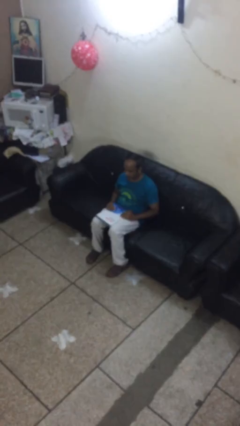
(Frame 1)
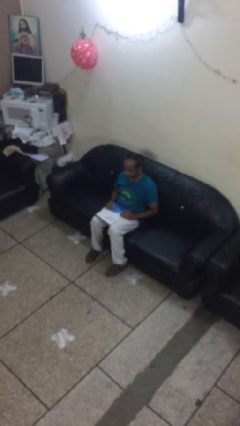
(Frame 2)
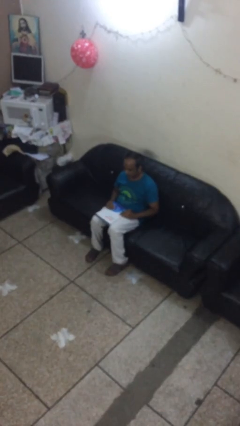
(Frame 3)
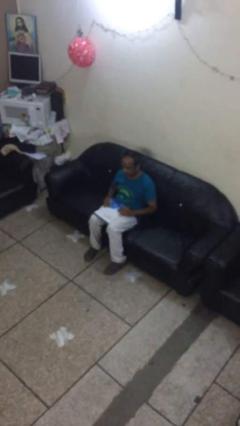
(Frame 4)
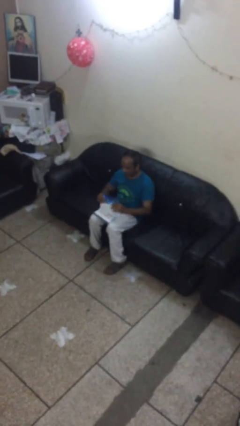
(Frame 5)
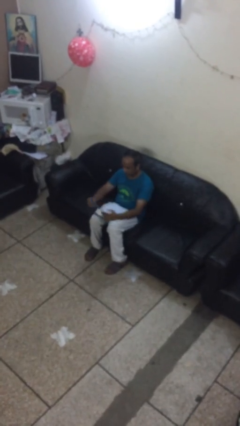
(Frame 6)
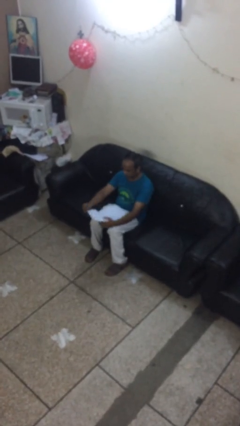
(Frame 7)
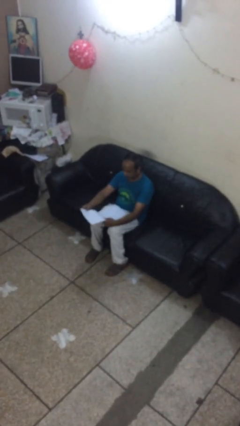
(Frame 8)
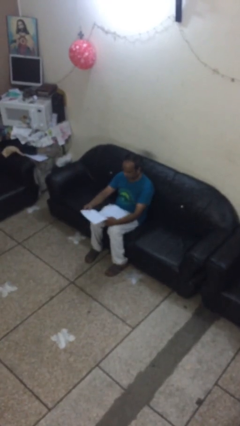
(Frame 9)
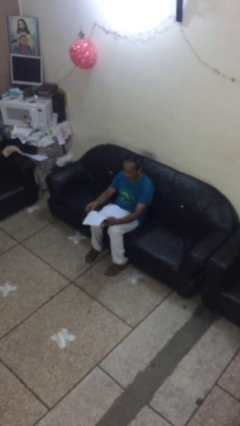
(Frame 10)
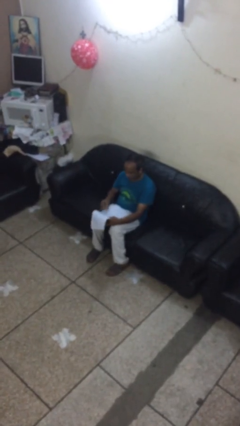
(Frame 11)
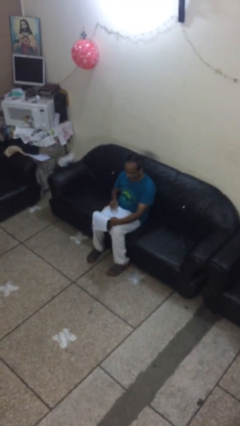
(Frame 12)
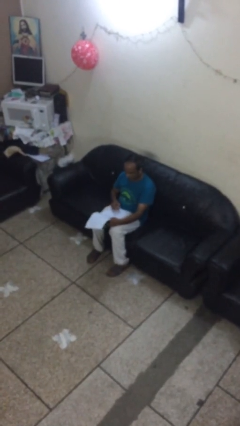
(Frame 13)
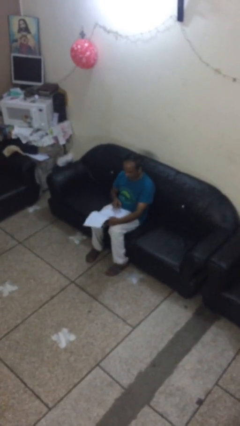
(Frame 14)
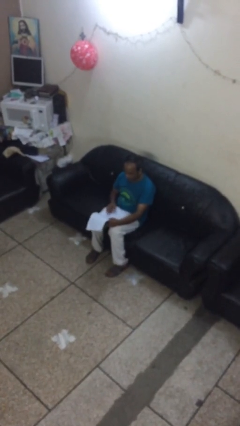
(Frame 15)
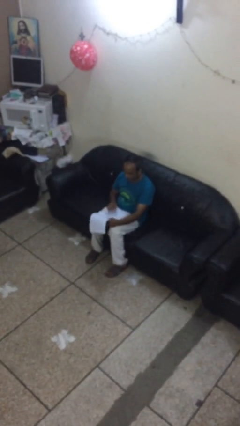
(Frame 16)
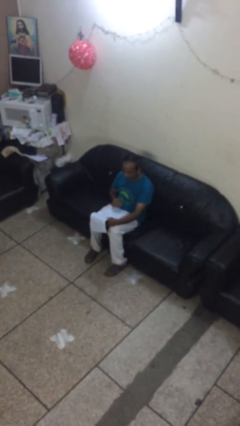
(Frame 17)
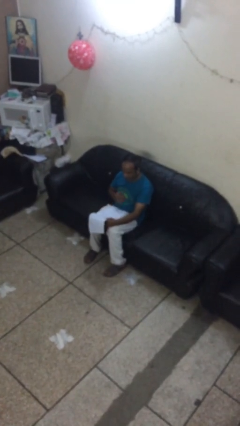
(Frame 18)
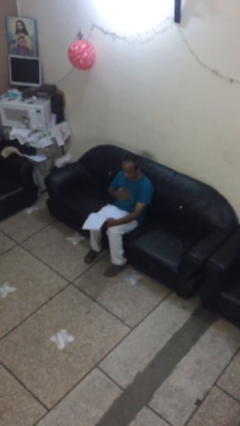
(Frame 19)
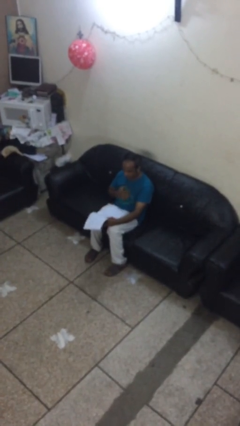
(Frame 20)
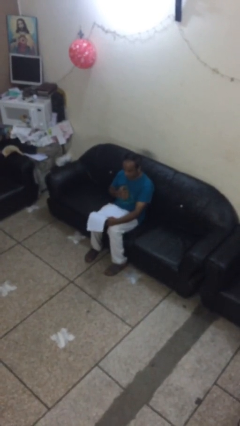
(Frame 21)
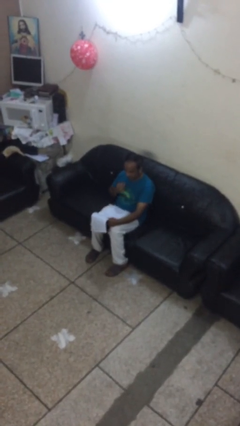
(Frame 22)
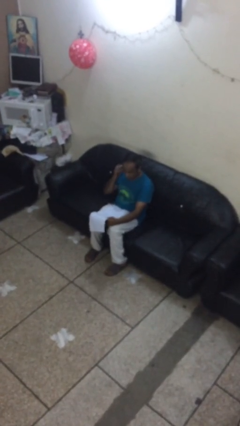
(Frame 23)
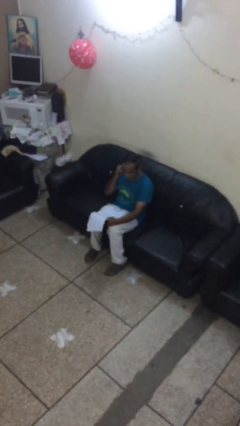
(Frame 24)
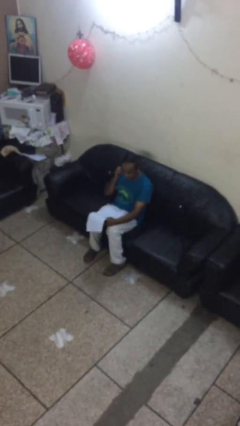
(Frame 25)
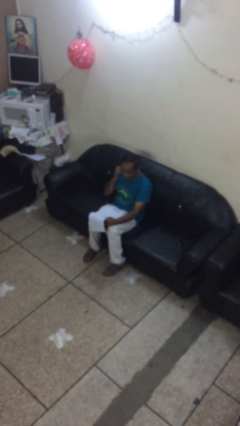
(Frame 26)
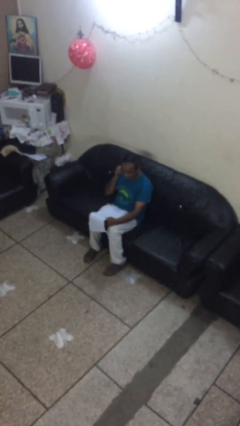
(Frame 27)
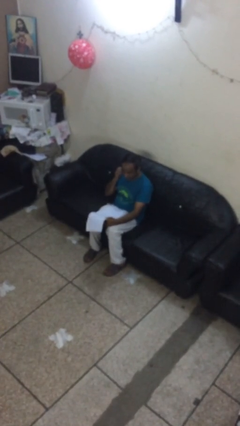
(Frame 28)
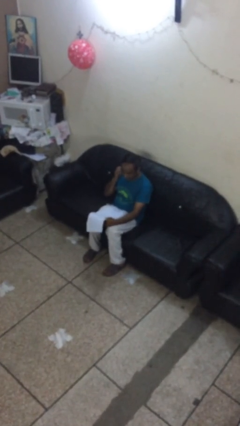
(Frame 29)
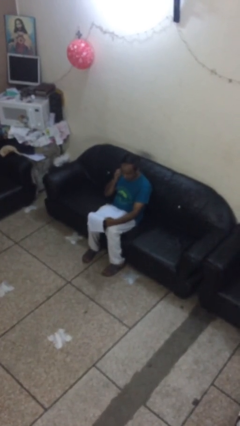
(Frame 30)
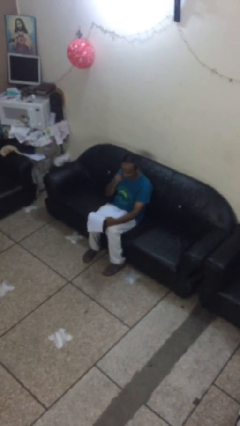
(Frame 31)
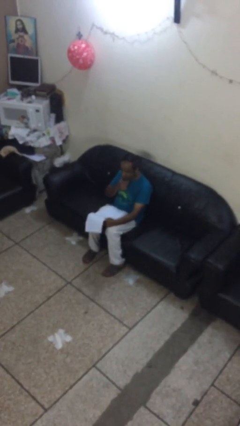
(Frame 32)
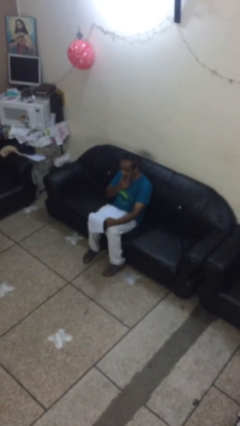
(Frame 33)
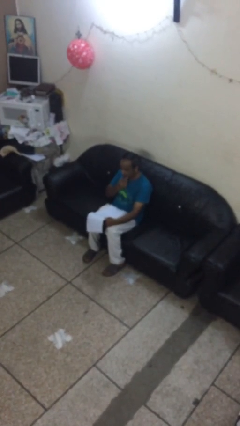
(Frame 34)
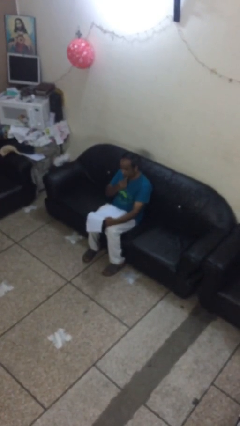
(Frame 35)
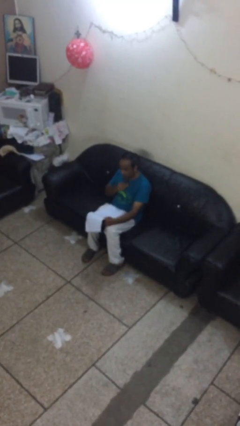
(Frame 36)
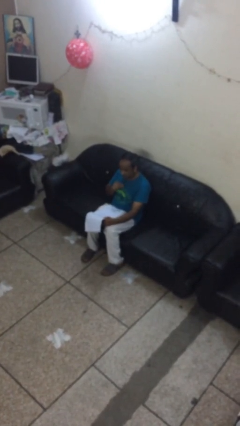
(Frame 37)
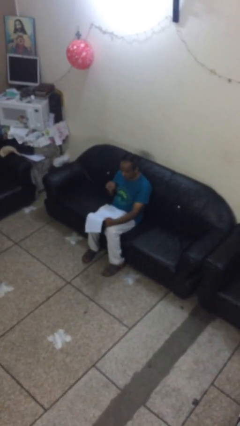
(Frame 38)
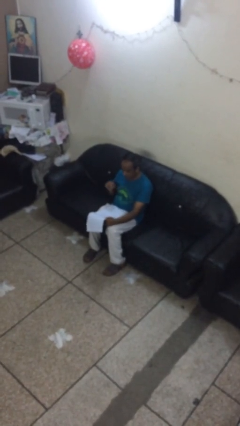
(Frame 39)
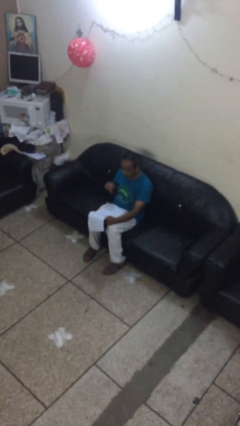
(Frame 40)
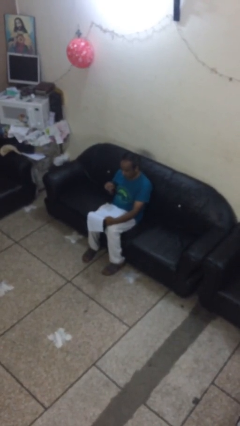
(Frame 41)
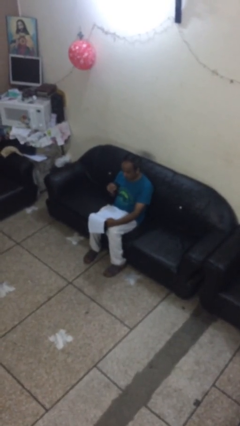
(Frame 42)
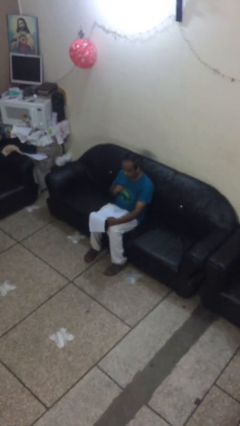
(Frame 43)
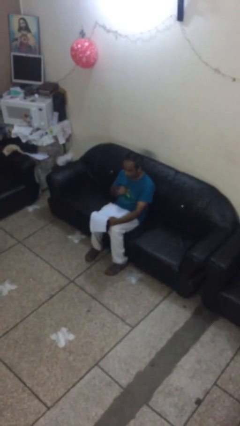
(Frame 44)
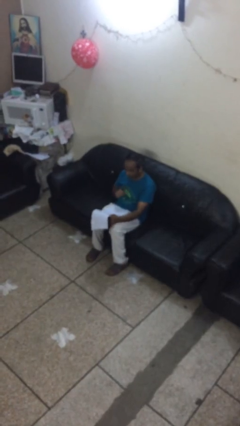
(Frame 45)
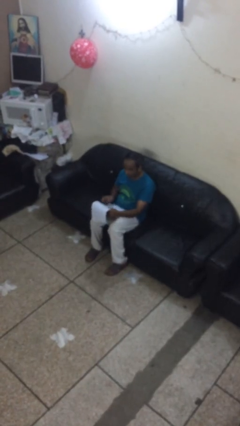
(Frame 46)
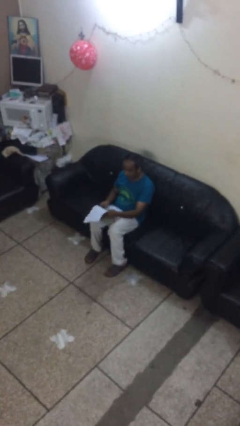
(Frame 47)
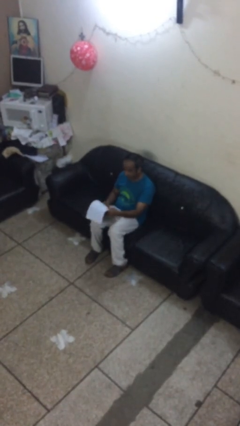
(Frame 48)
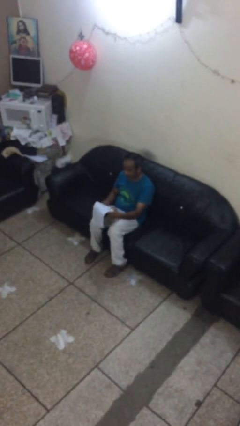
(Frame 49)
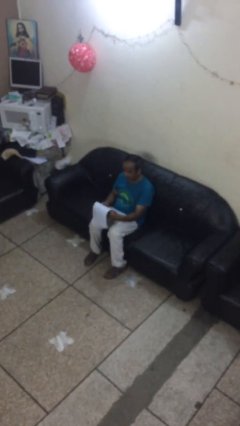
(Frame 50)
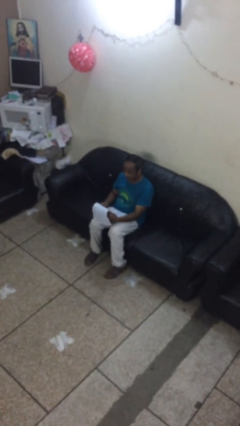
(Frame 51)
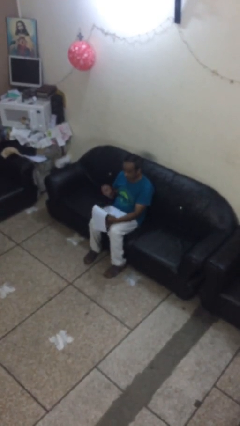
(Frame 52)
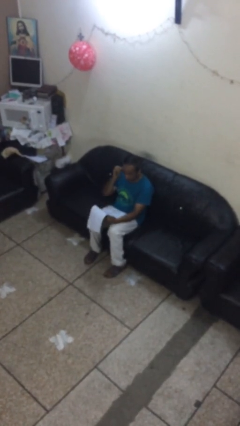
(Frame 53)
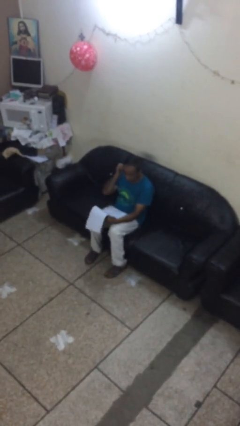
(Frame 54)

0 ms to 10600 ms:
person reads document

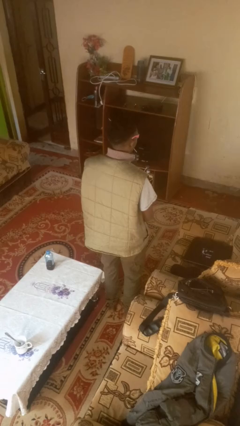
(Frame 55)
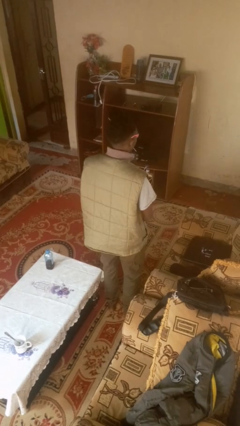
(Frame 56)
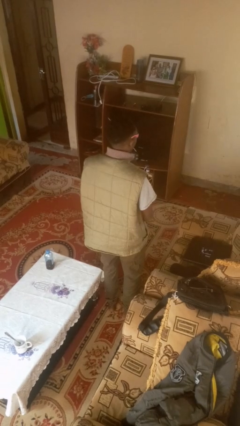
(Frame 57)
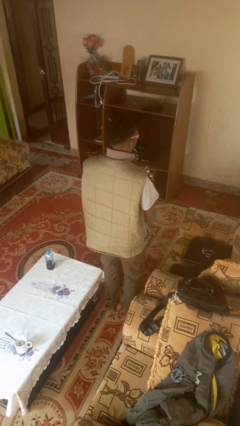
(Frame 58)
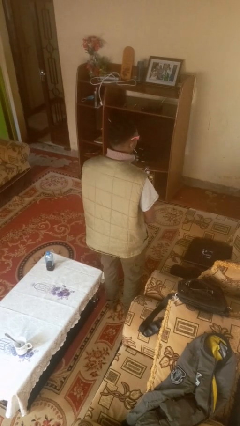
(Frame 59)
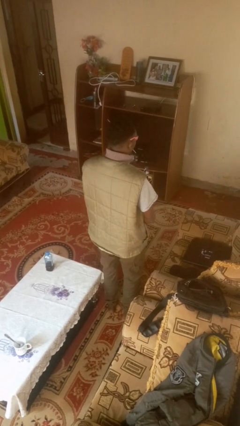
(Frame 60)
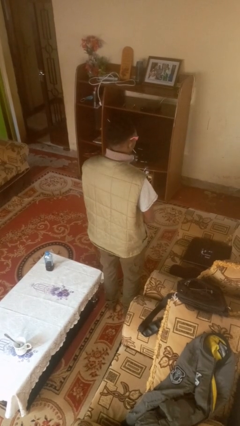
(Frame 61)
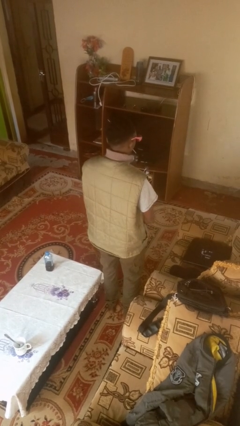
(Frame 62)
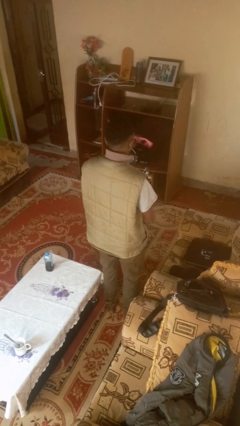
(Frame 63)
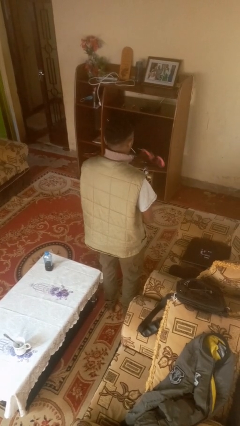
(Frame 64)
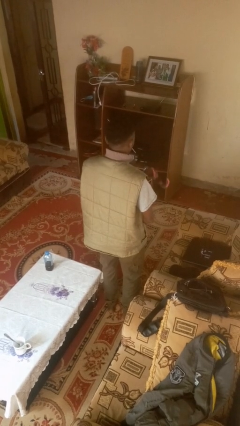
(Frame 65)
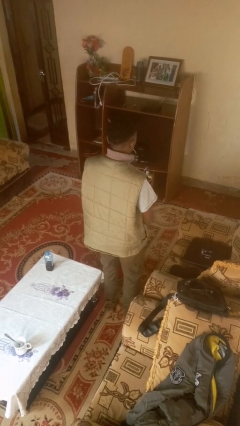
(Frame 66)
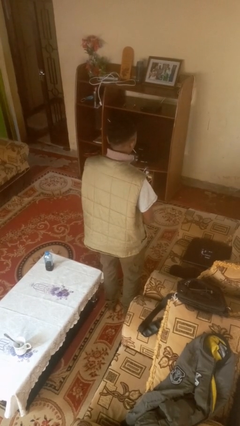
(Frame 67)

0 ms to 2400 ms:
person takes off sunglasses

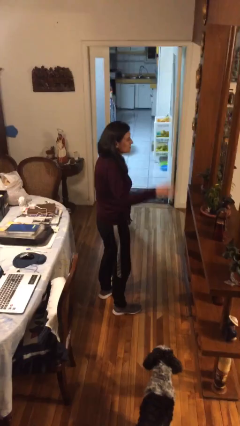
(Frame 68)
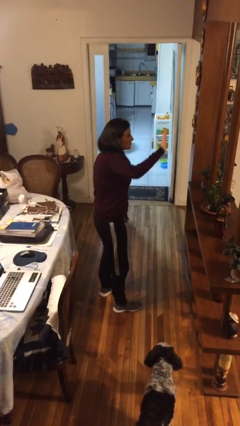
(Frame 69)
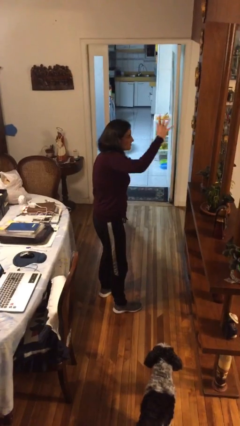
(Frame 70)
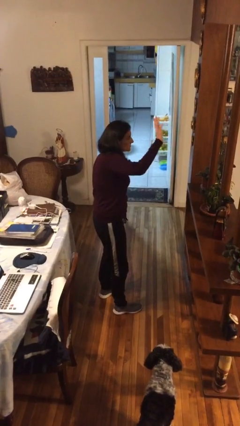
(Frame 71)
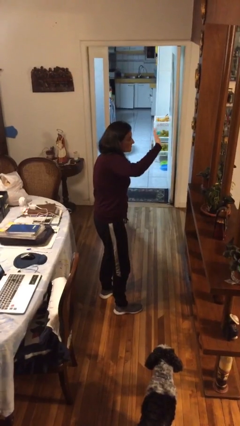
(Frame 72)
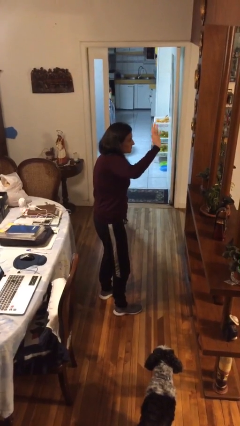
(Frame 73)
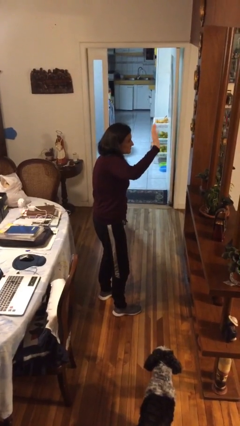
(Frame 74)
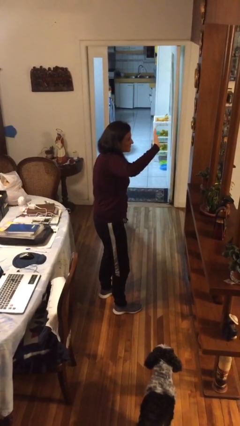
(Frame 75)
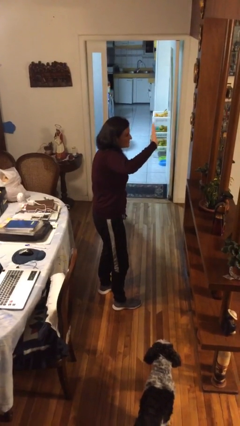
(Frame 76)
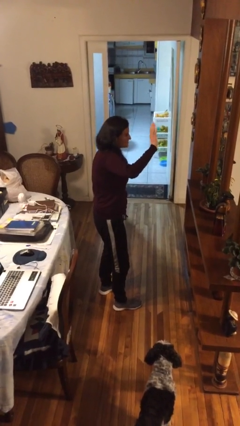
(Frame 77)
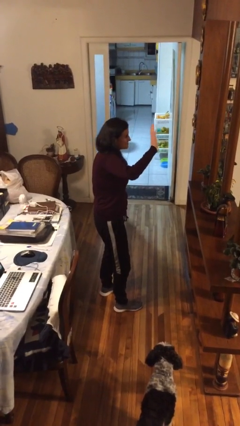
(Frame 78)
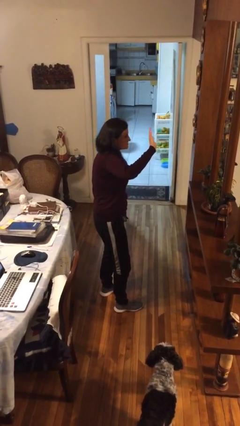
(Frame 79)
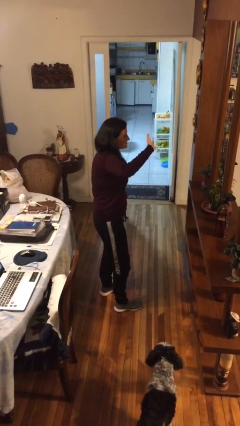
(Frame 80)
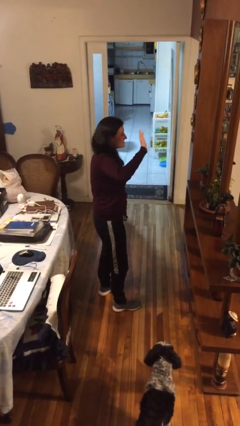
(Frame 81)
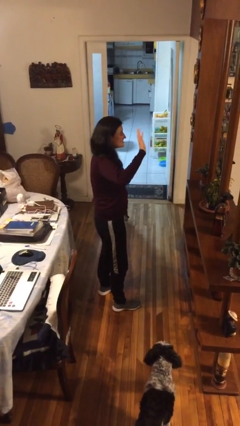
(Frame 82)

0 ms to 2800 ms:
person waves at person

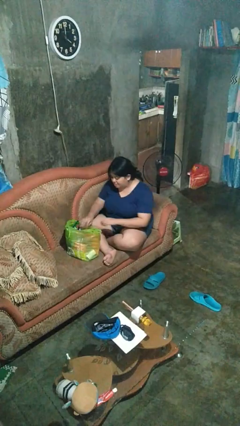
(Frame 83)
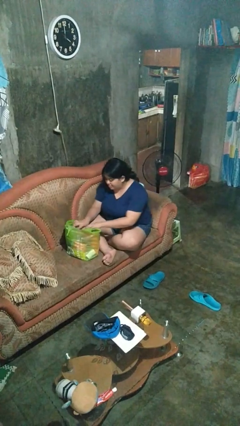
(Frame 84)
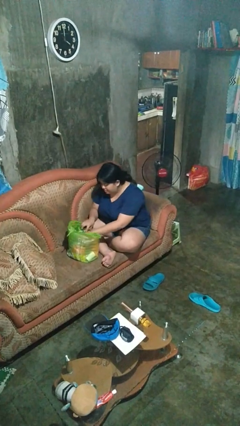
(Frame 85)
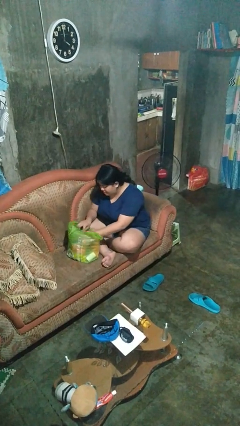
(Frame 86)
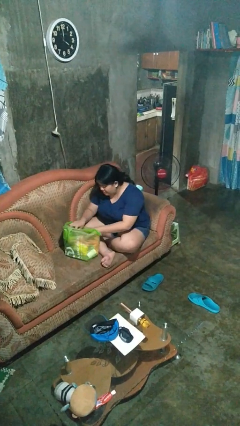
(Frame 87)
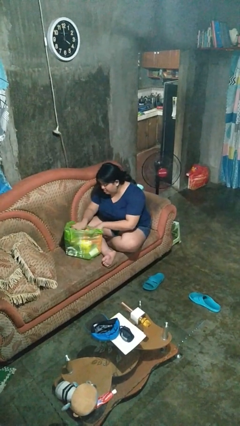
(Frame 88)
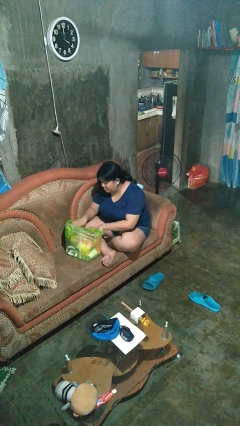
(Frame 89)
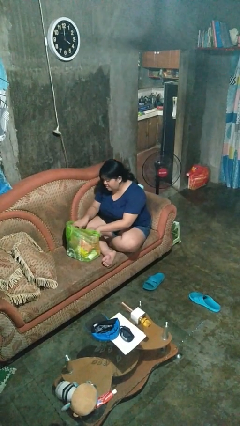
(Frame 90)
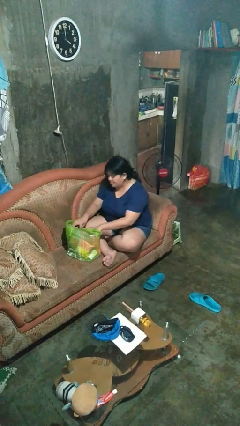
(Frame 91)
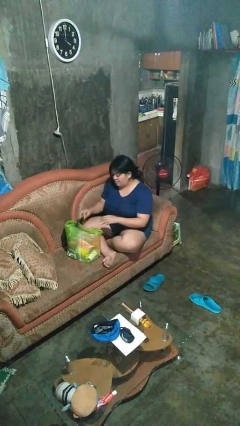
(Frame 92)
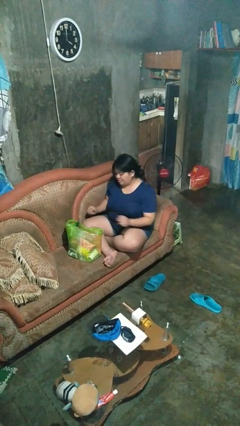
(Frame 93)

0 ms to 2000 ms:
person searches in bag
